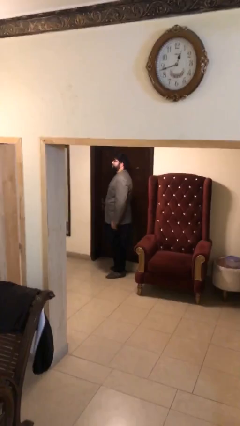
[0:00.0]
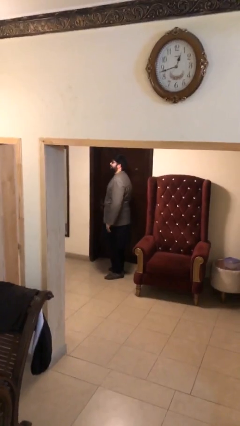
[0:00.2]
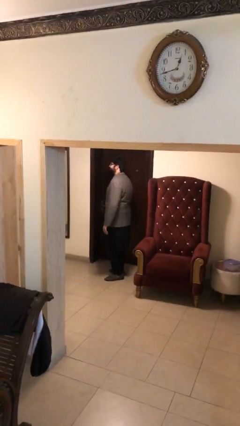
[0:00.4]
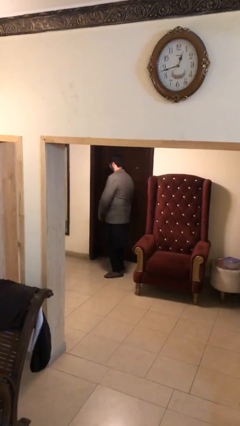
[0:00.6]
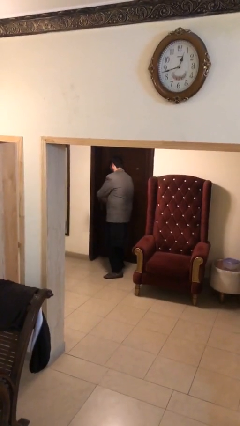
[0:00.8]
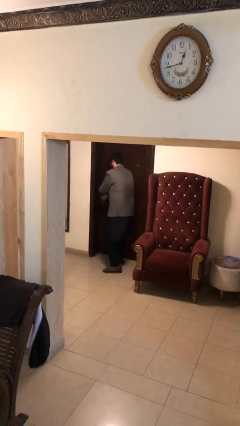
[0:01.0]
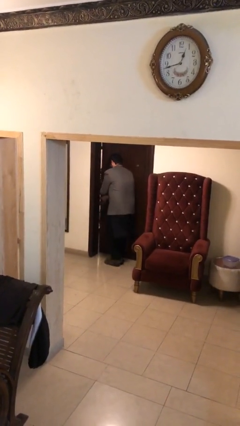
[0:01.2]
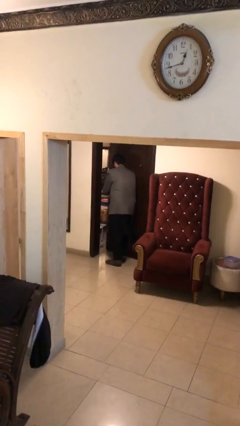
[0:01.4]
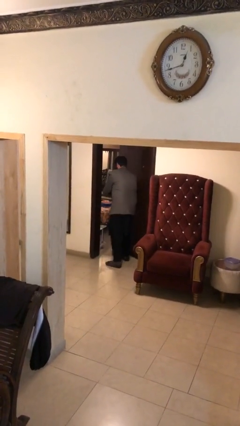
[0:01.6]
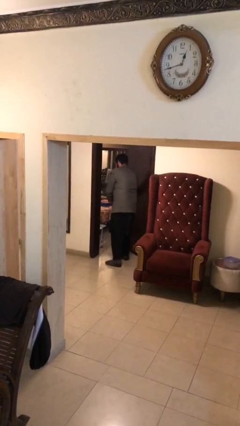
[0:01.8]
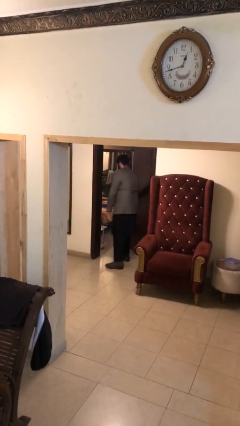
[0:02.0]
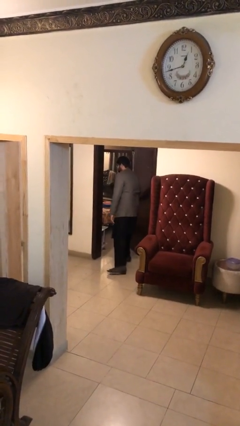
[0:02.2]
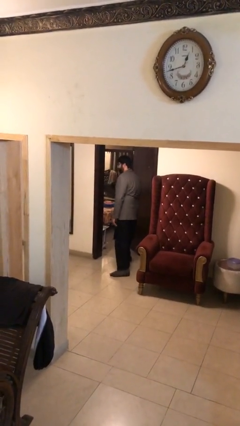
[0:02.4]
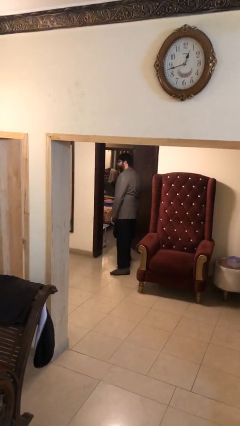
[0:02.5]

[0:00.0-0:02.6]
person opens facility door

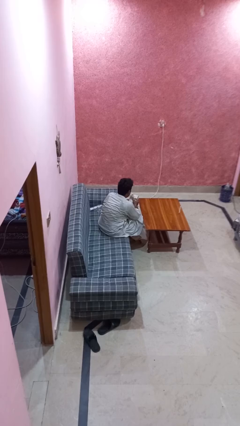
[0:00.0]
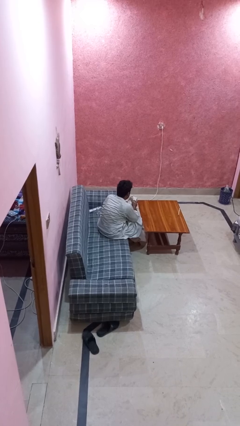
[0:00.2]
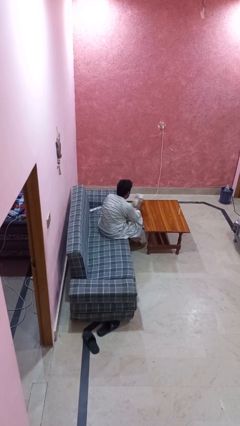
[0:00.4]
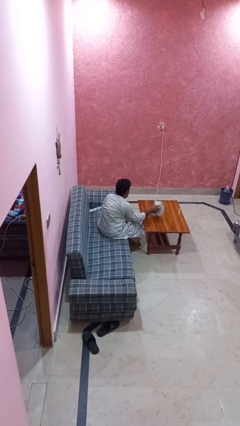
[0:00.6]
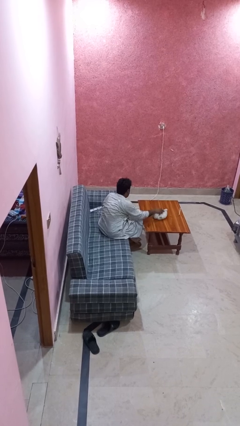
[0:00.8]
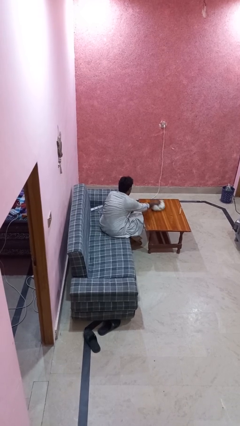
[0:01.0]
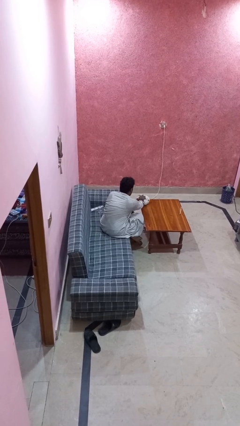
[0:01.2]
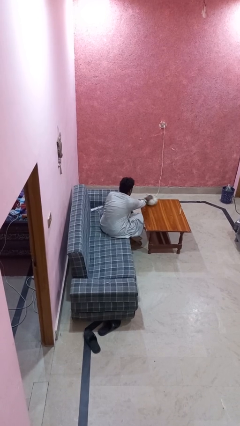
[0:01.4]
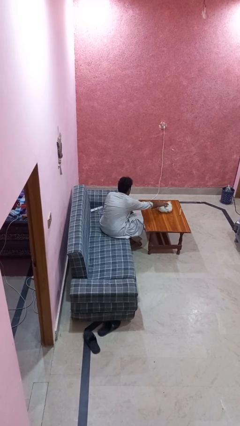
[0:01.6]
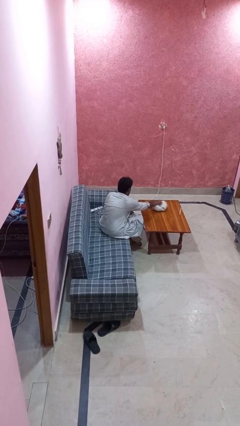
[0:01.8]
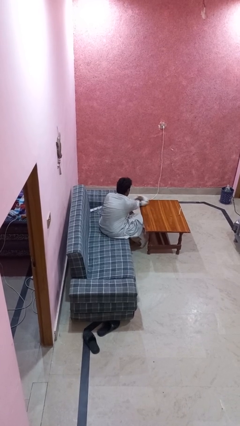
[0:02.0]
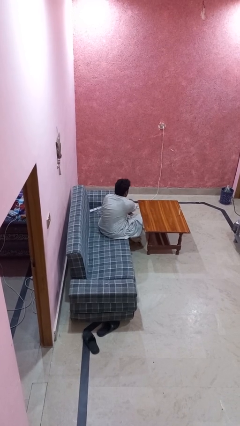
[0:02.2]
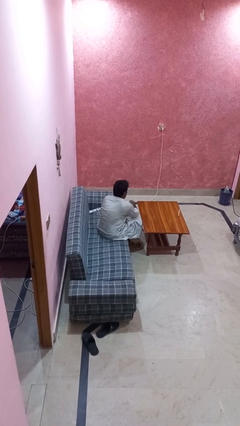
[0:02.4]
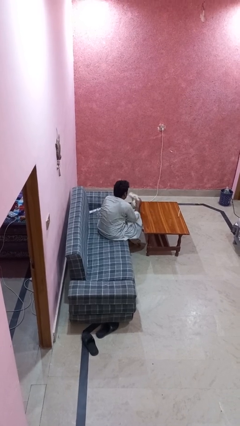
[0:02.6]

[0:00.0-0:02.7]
person cleans table with rag

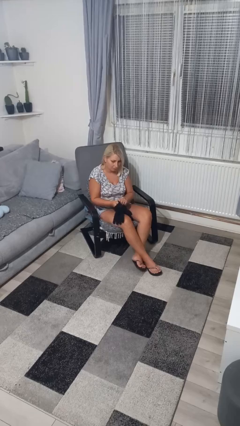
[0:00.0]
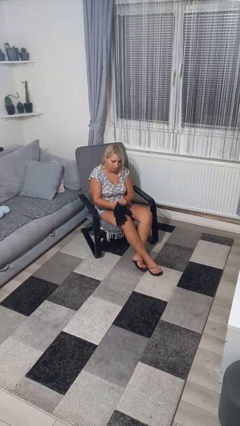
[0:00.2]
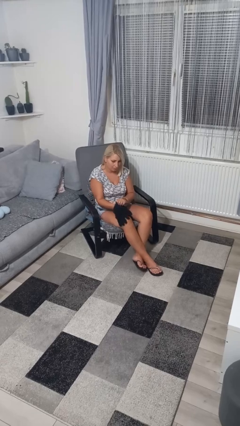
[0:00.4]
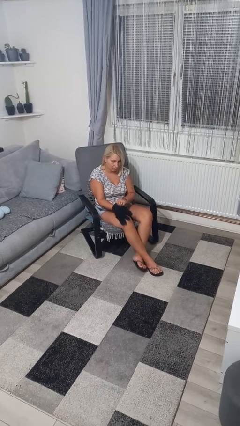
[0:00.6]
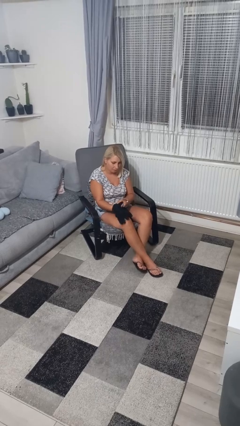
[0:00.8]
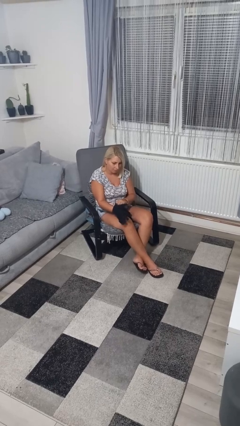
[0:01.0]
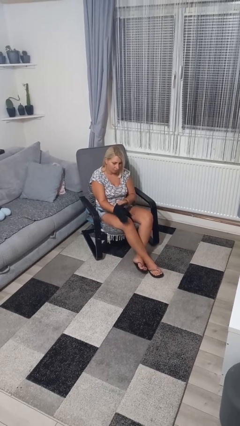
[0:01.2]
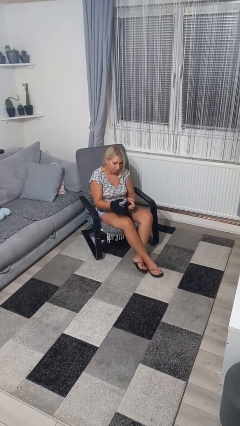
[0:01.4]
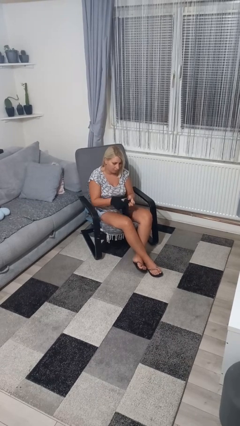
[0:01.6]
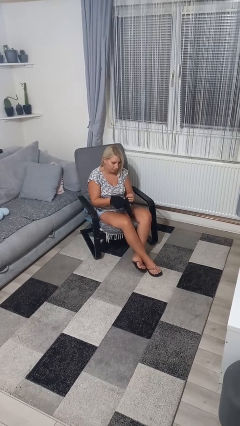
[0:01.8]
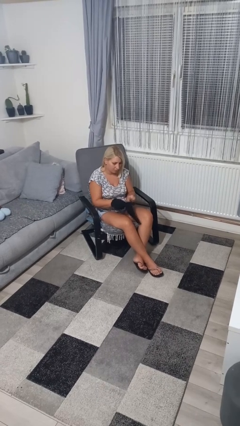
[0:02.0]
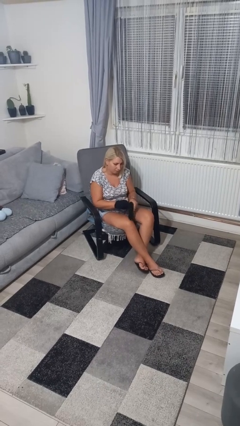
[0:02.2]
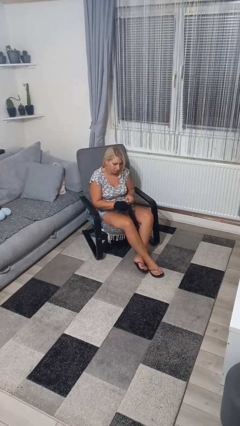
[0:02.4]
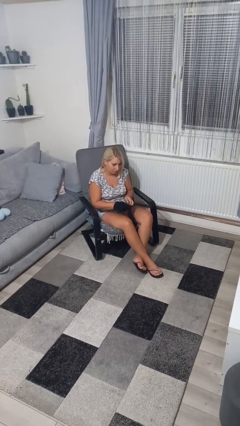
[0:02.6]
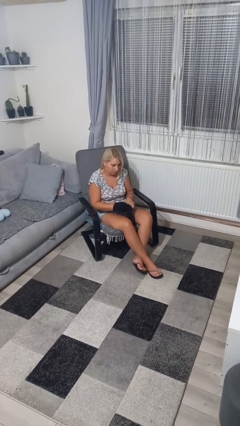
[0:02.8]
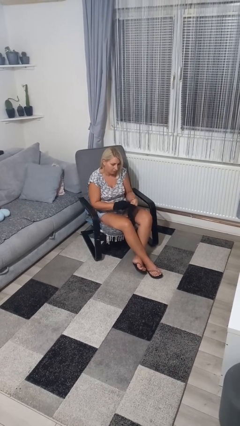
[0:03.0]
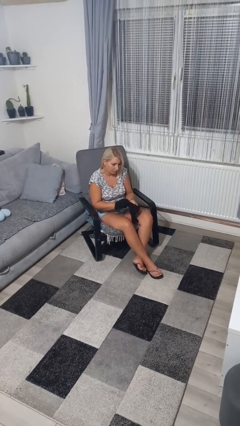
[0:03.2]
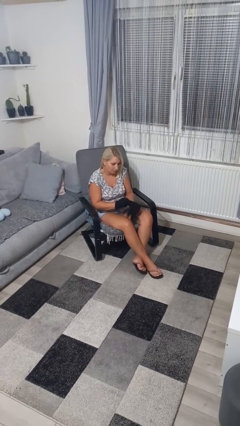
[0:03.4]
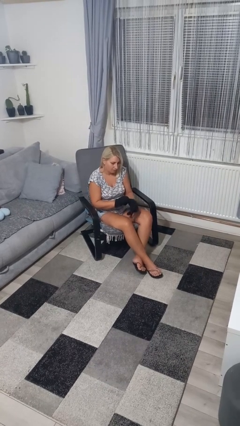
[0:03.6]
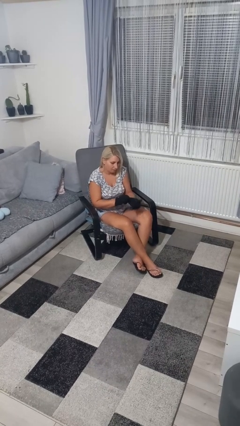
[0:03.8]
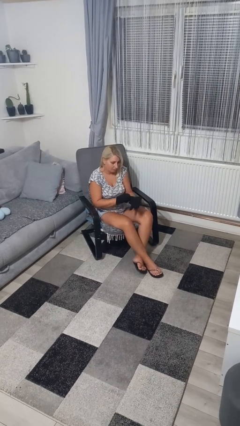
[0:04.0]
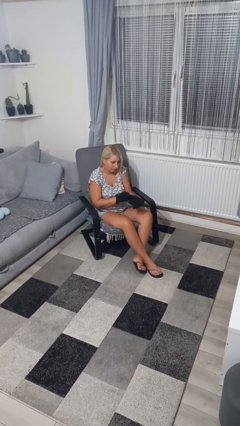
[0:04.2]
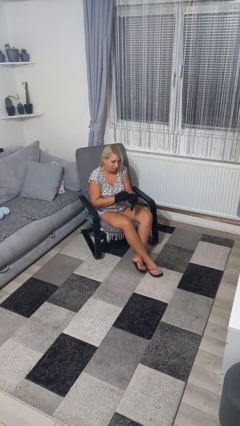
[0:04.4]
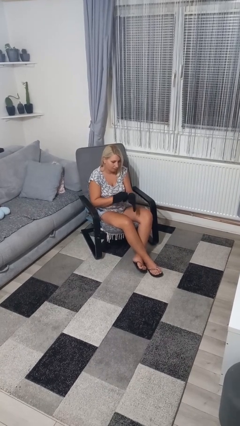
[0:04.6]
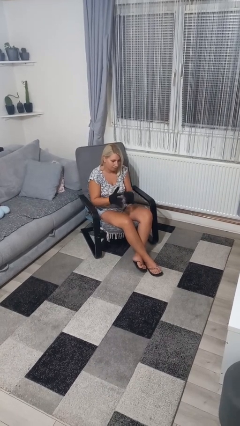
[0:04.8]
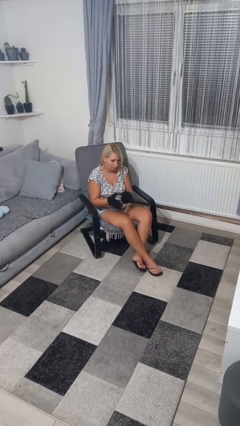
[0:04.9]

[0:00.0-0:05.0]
person puts on gloves

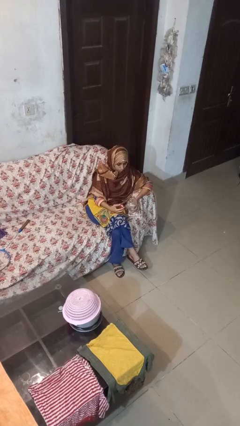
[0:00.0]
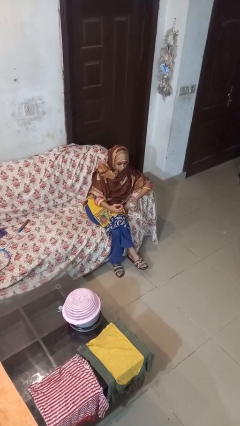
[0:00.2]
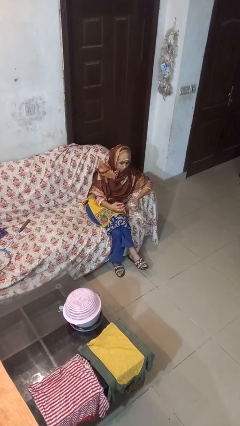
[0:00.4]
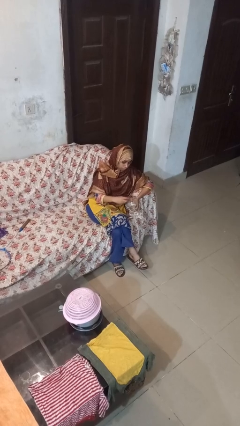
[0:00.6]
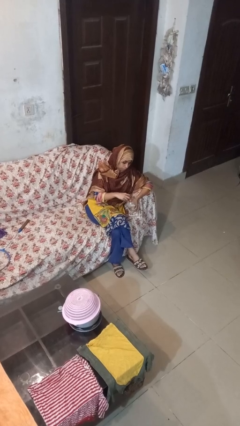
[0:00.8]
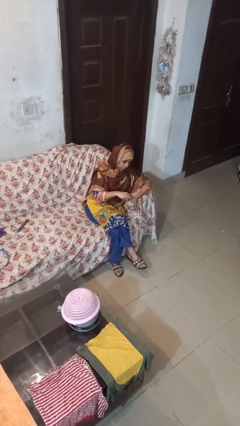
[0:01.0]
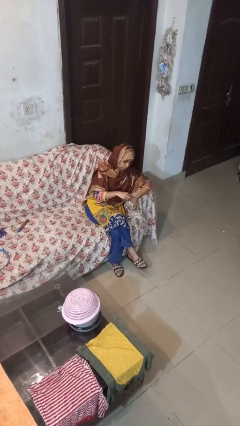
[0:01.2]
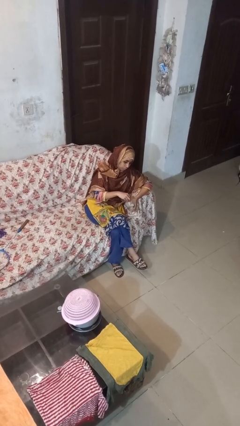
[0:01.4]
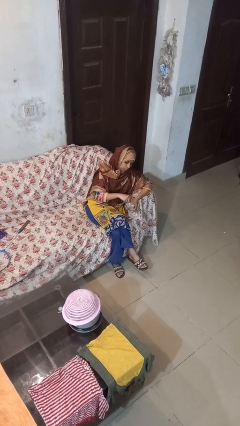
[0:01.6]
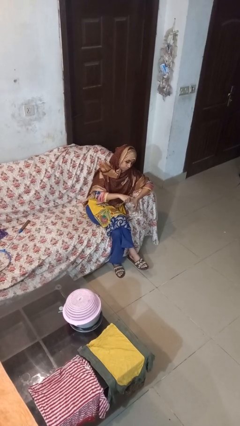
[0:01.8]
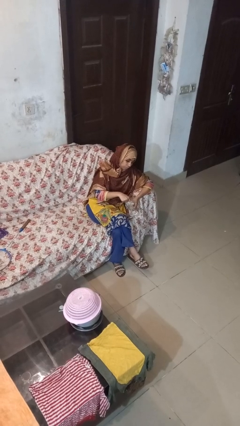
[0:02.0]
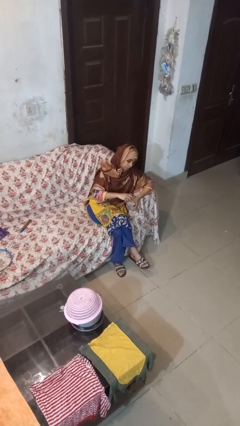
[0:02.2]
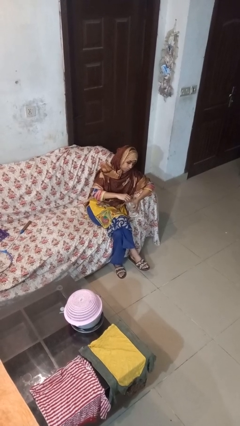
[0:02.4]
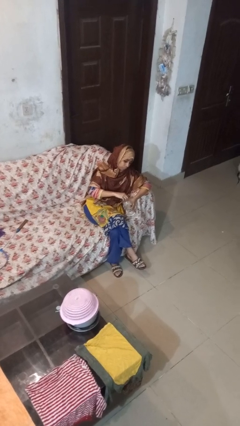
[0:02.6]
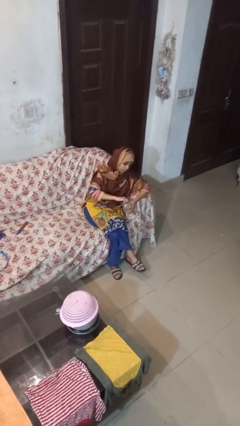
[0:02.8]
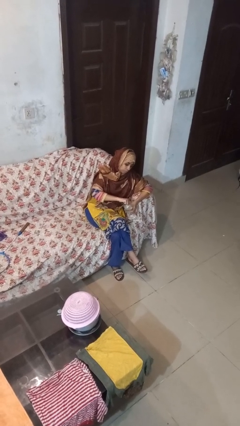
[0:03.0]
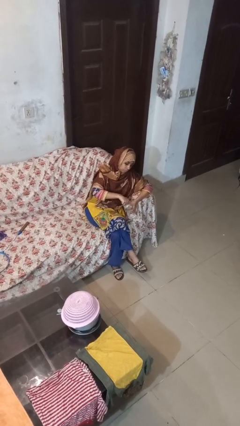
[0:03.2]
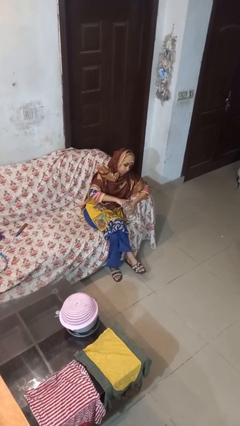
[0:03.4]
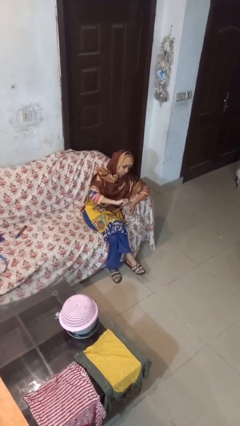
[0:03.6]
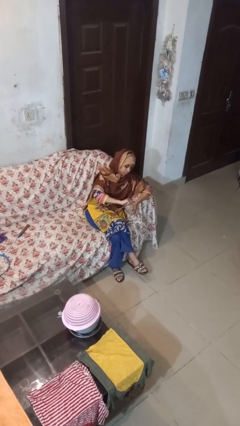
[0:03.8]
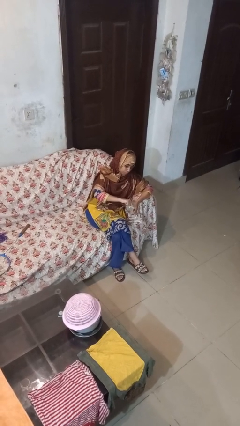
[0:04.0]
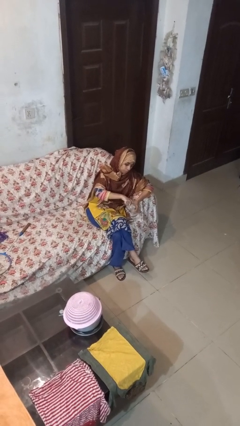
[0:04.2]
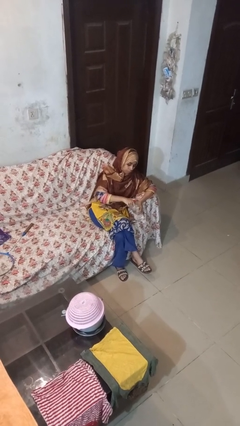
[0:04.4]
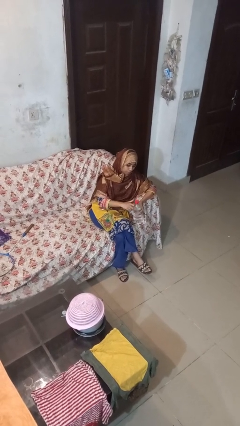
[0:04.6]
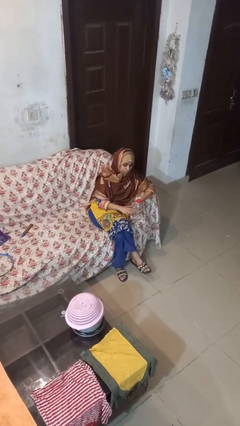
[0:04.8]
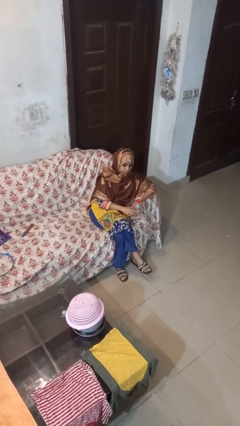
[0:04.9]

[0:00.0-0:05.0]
person screws lid to bottle

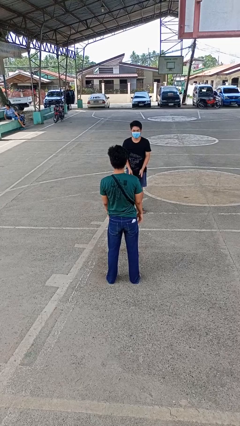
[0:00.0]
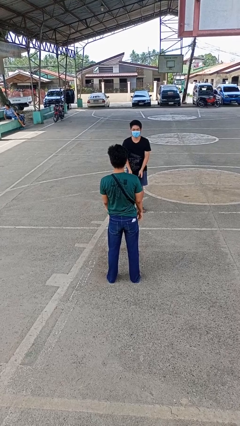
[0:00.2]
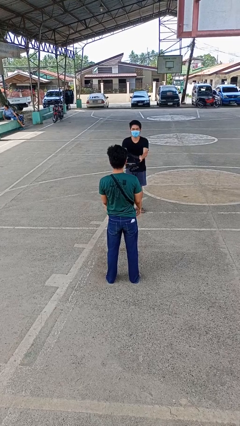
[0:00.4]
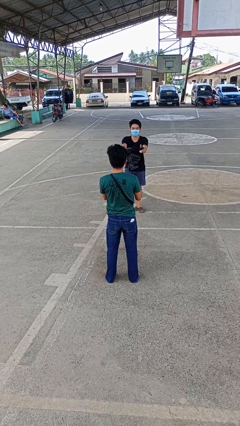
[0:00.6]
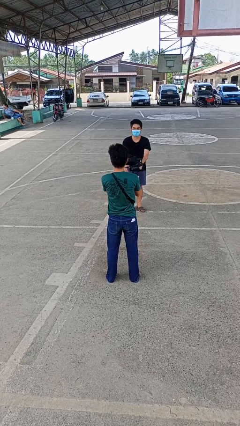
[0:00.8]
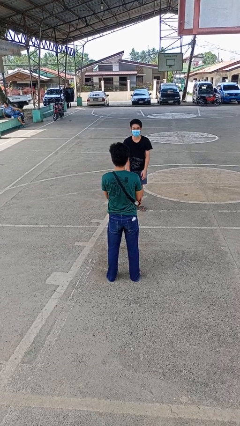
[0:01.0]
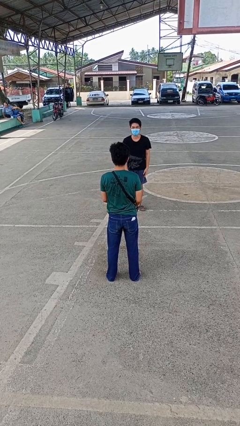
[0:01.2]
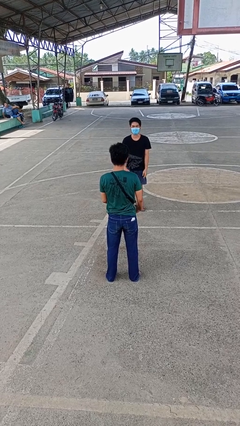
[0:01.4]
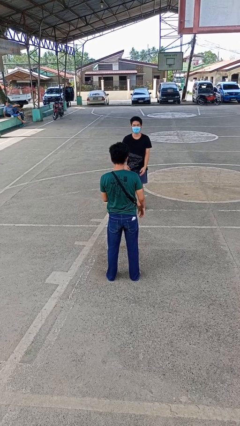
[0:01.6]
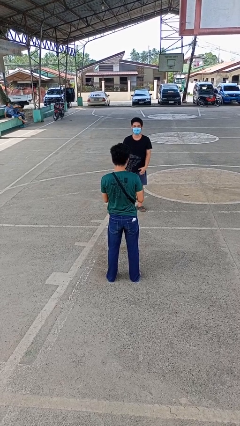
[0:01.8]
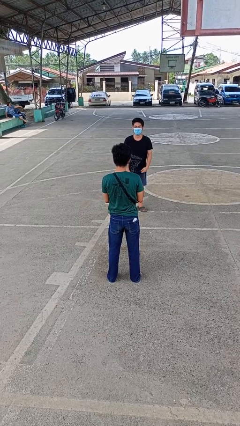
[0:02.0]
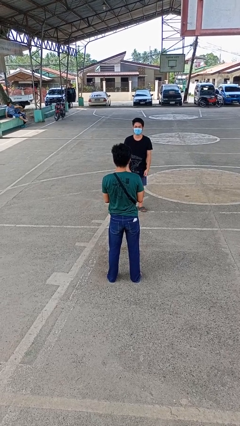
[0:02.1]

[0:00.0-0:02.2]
person catches object from person
